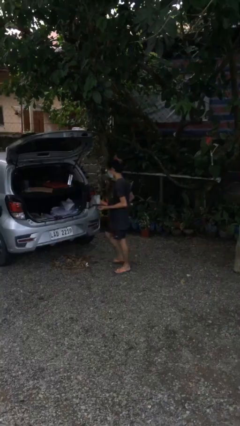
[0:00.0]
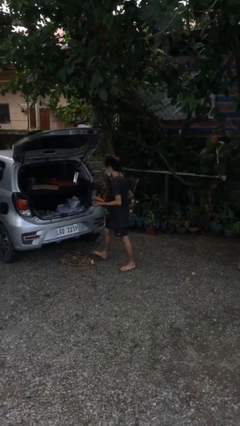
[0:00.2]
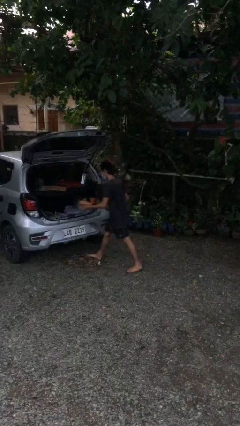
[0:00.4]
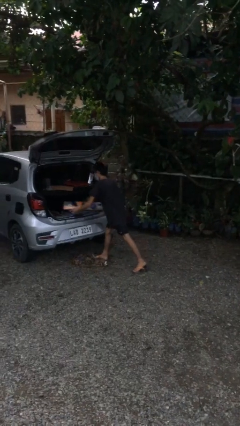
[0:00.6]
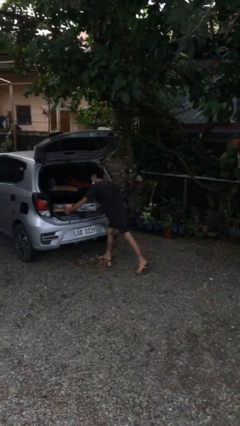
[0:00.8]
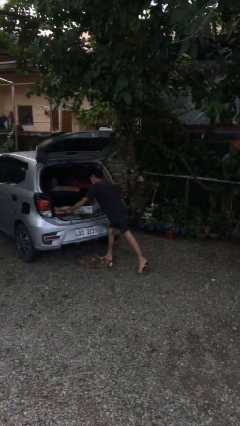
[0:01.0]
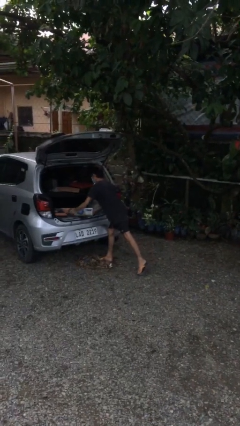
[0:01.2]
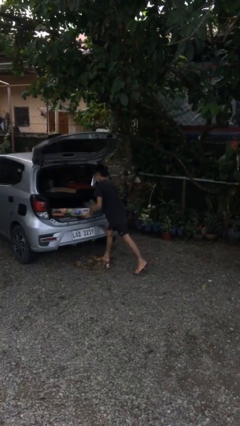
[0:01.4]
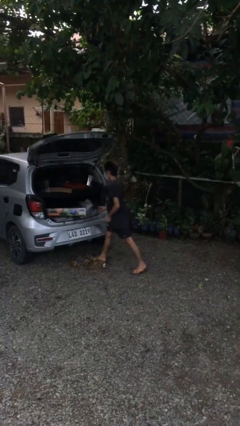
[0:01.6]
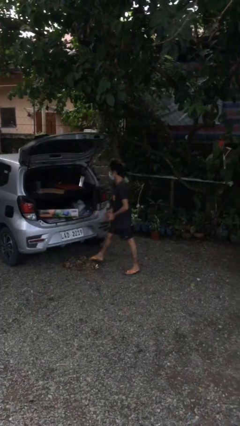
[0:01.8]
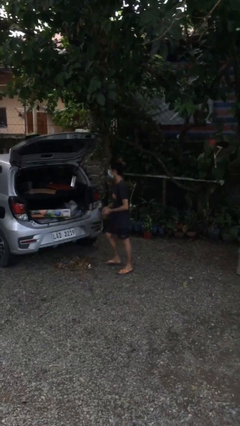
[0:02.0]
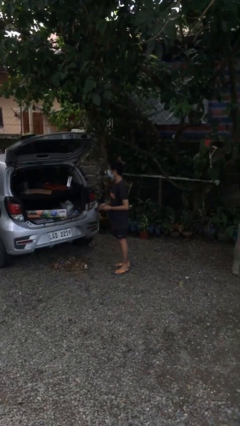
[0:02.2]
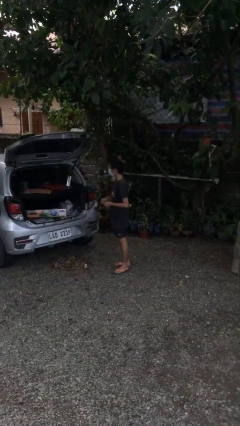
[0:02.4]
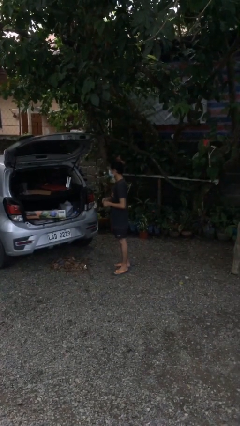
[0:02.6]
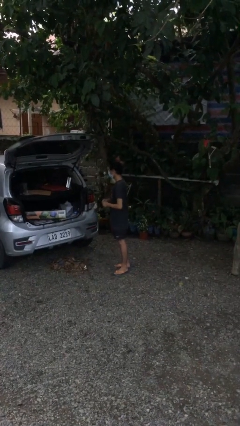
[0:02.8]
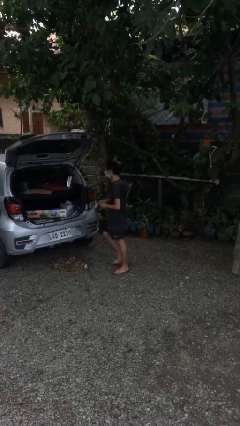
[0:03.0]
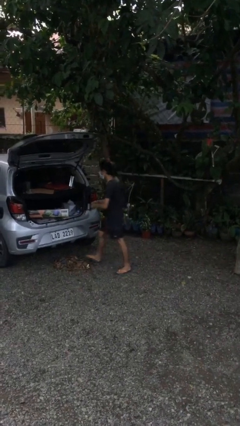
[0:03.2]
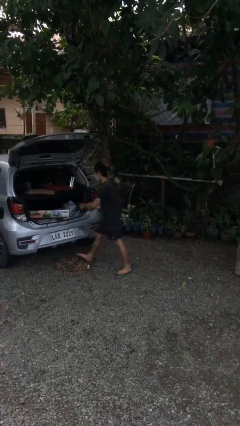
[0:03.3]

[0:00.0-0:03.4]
person loads car

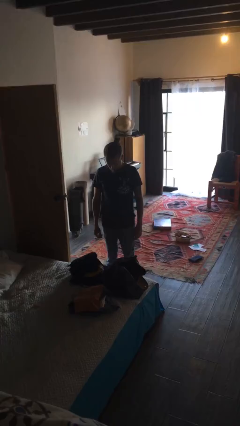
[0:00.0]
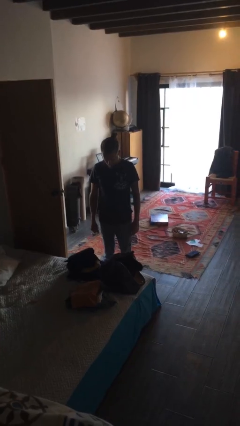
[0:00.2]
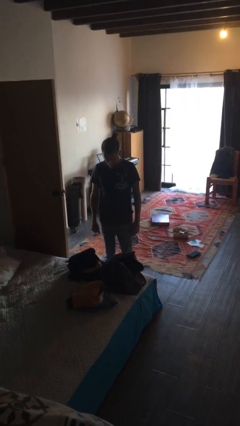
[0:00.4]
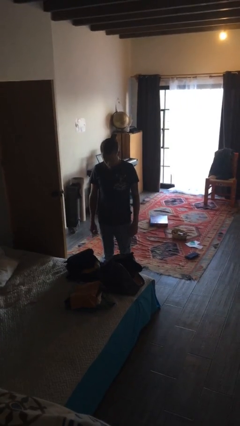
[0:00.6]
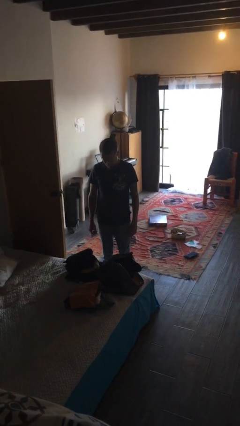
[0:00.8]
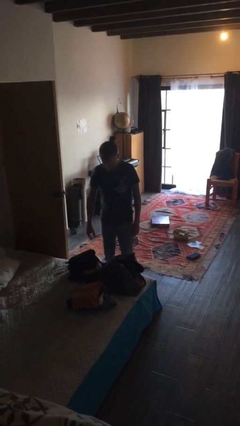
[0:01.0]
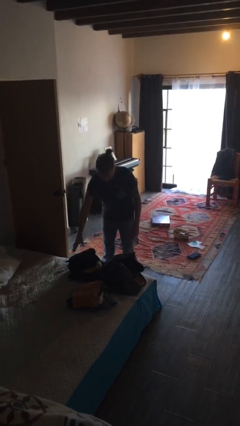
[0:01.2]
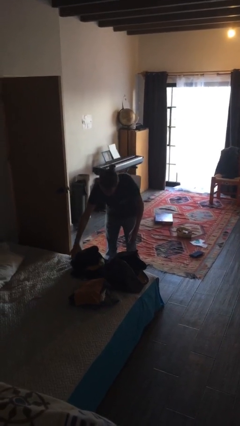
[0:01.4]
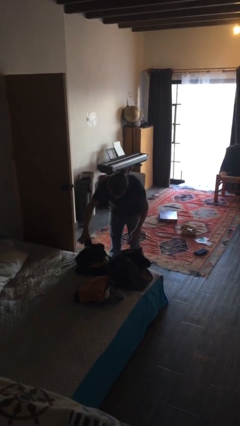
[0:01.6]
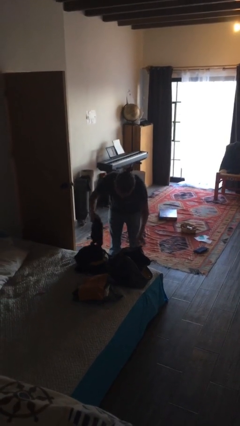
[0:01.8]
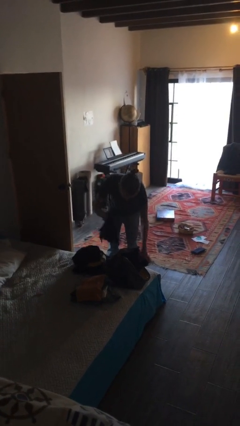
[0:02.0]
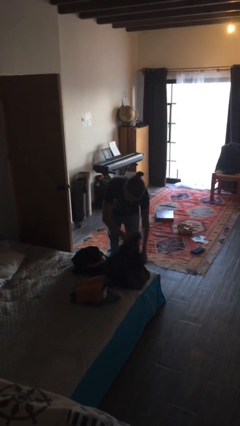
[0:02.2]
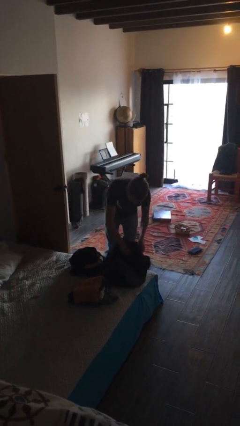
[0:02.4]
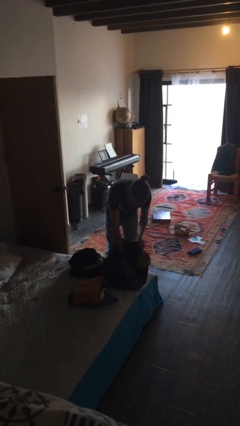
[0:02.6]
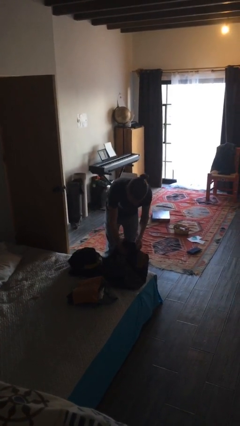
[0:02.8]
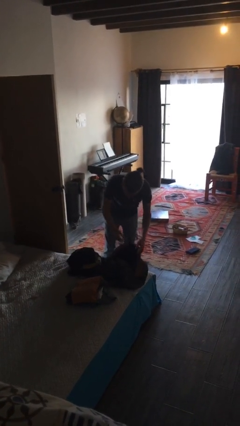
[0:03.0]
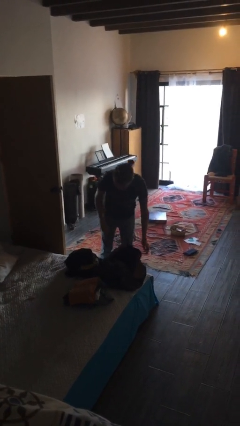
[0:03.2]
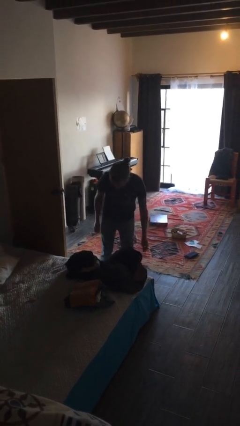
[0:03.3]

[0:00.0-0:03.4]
person loads clothes into suitcase

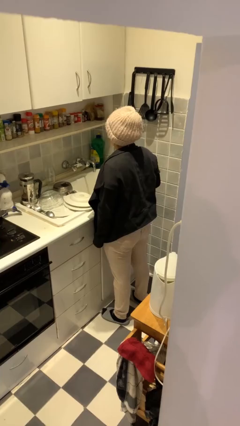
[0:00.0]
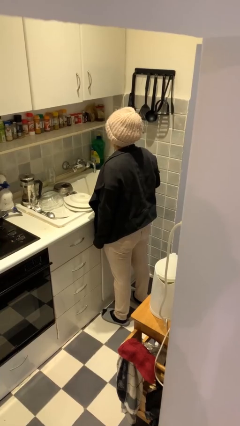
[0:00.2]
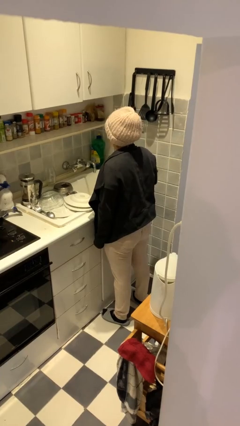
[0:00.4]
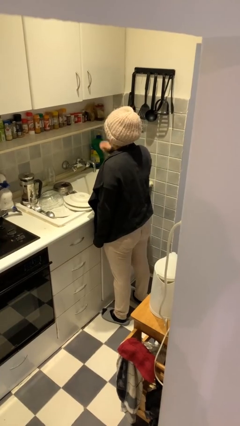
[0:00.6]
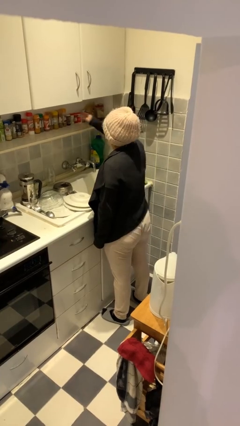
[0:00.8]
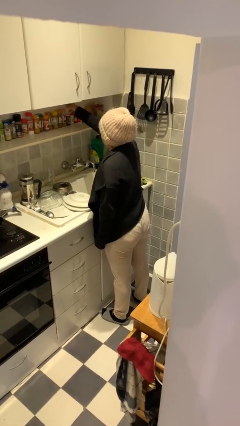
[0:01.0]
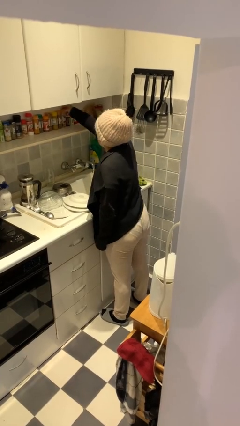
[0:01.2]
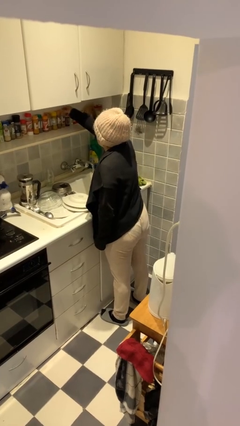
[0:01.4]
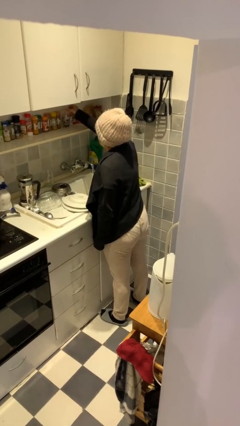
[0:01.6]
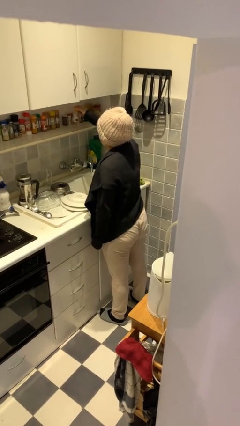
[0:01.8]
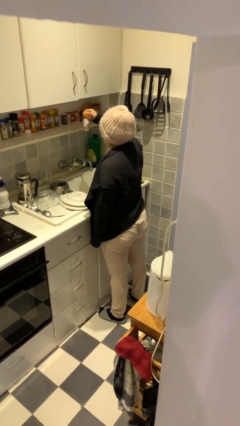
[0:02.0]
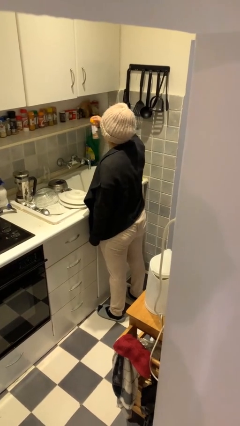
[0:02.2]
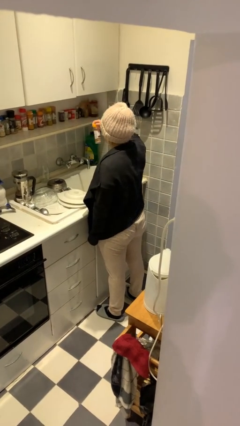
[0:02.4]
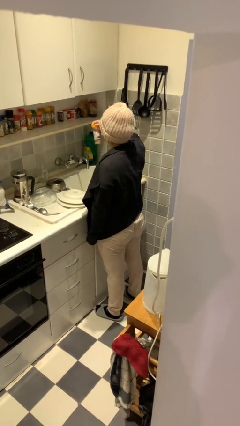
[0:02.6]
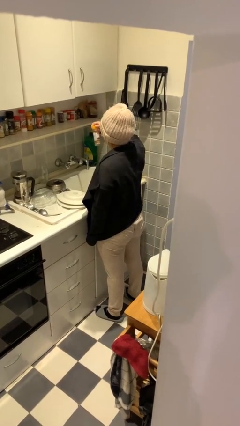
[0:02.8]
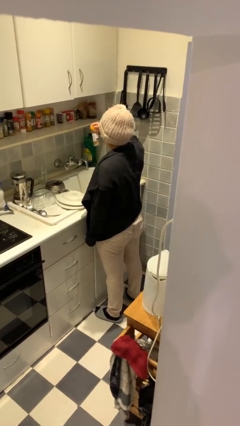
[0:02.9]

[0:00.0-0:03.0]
person picks up object from countertop

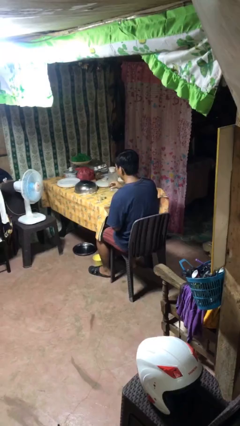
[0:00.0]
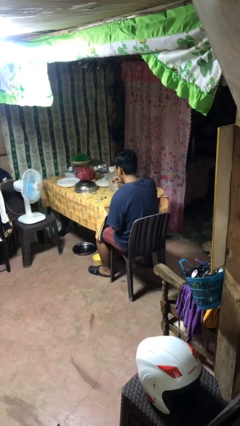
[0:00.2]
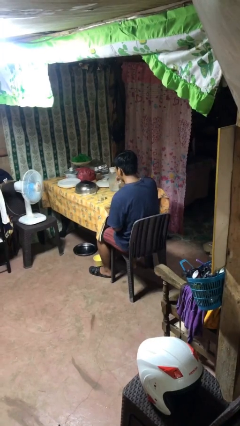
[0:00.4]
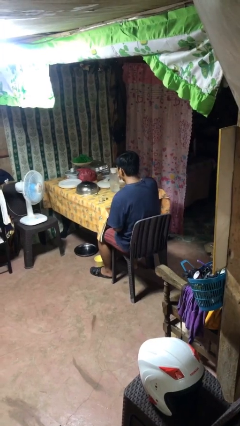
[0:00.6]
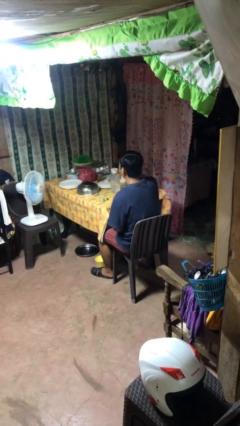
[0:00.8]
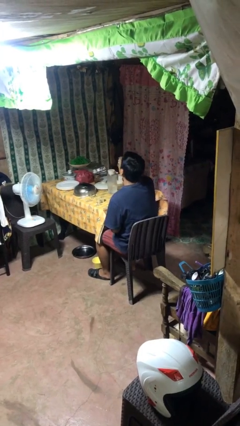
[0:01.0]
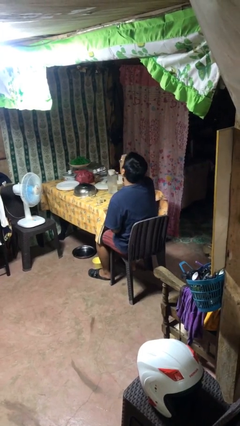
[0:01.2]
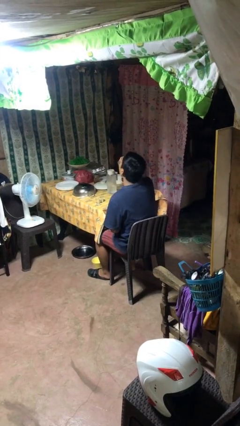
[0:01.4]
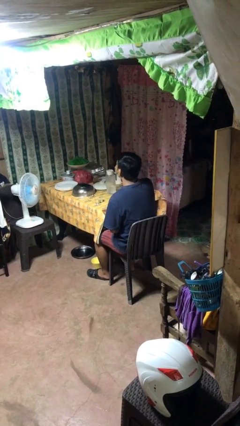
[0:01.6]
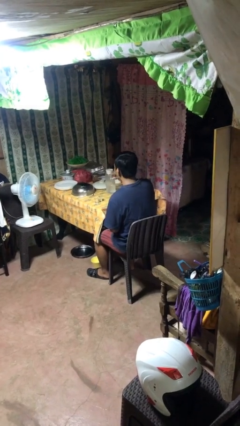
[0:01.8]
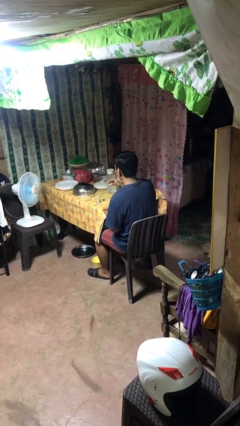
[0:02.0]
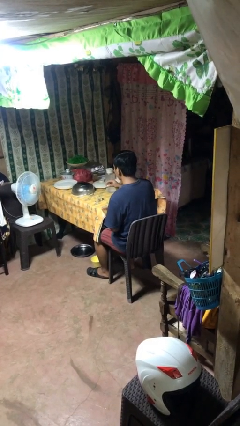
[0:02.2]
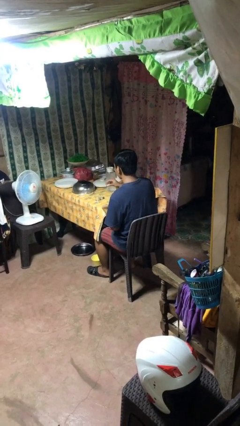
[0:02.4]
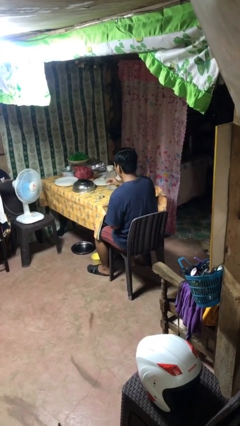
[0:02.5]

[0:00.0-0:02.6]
person drinks from shotglass

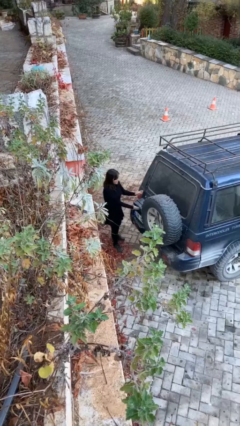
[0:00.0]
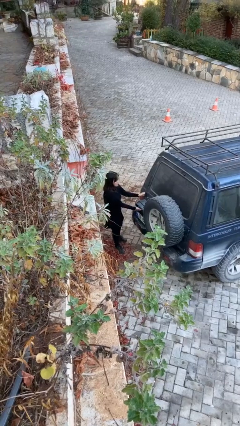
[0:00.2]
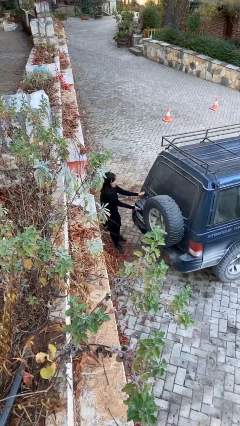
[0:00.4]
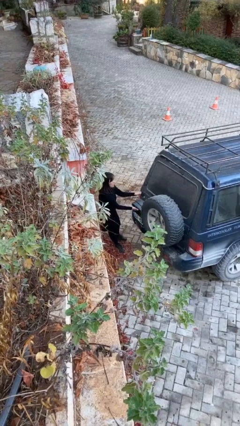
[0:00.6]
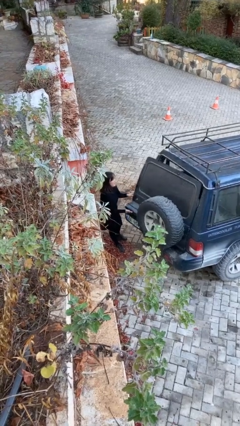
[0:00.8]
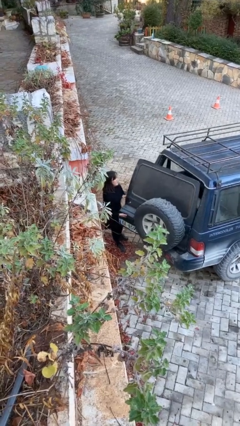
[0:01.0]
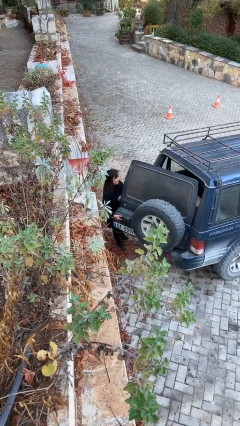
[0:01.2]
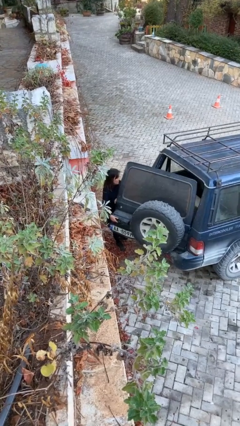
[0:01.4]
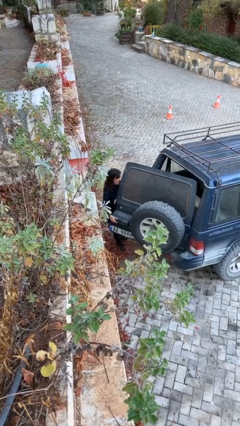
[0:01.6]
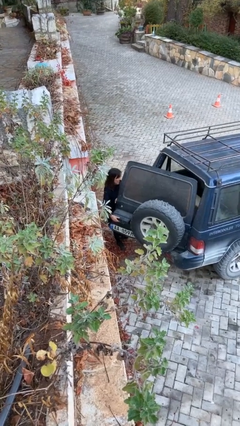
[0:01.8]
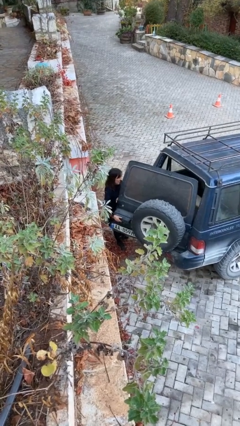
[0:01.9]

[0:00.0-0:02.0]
person opens car trunk

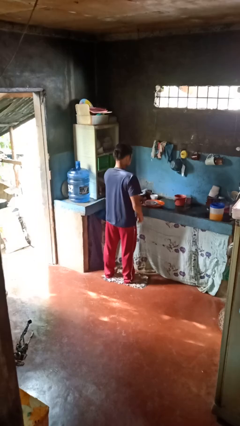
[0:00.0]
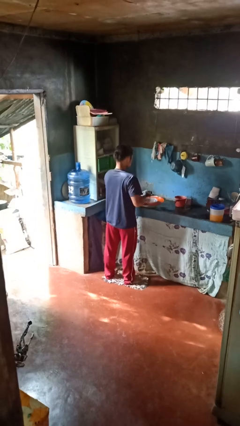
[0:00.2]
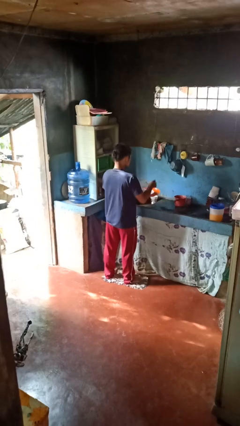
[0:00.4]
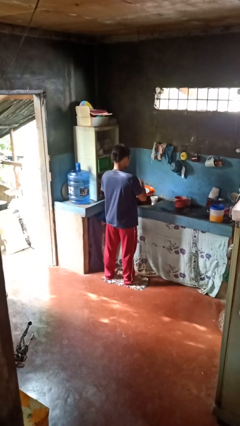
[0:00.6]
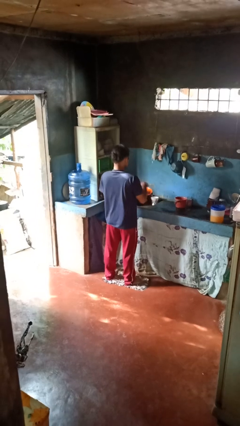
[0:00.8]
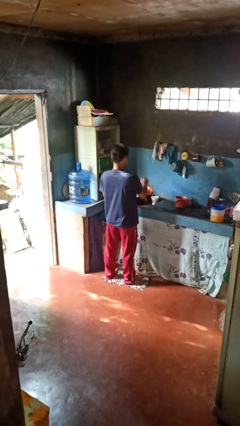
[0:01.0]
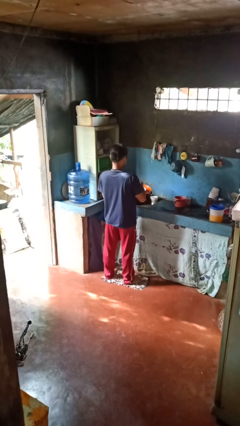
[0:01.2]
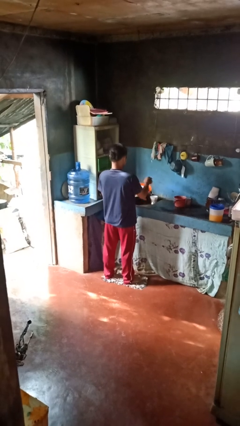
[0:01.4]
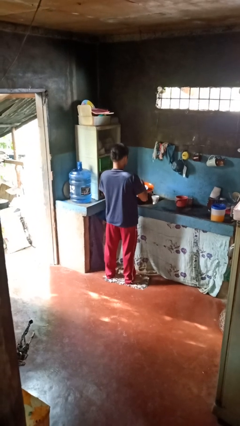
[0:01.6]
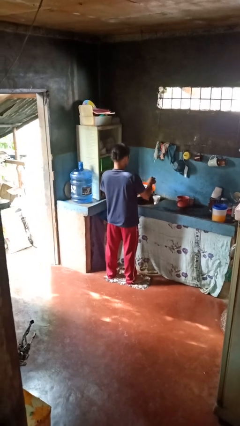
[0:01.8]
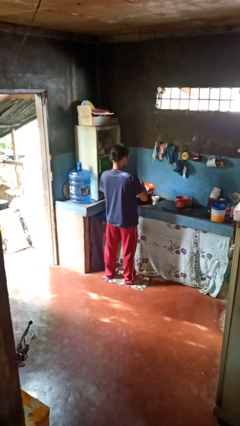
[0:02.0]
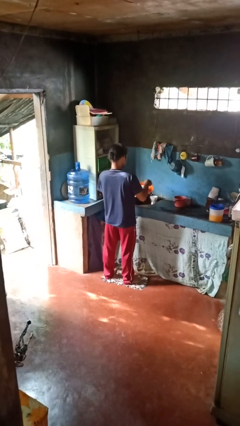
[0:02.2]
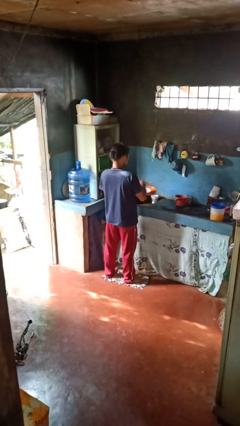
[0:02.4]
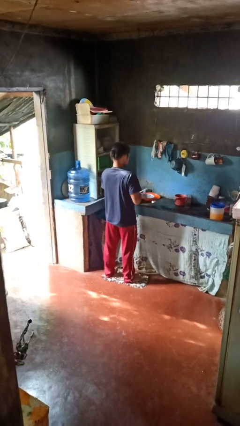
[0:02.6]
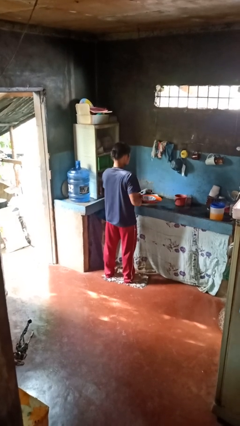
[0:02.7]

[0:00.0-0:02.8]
person washes dish

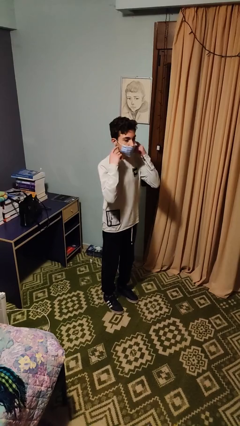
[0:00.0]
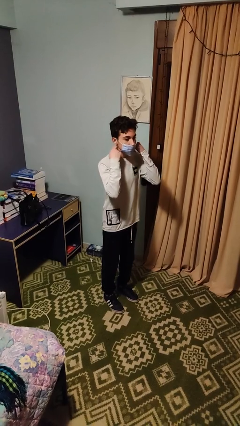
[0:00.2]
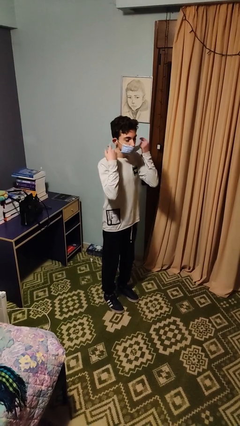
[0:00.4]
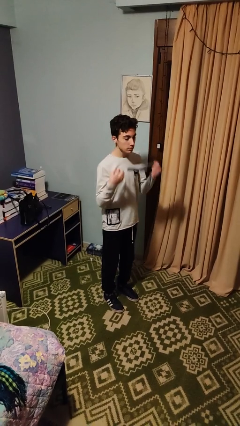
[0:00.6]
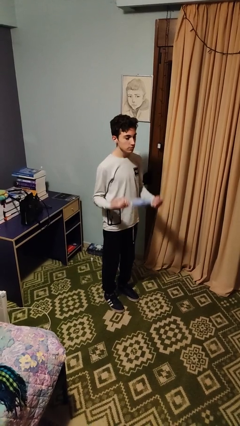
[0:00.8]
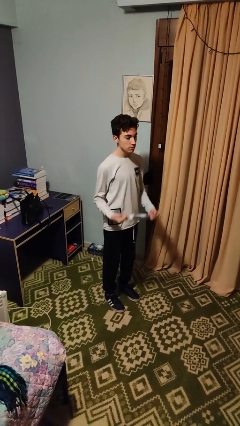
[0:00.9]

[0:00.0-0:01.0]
person takes off facemask
